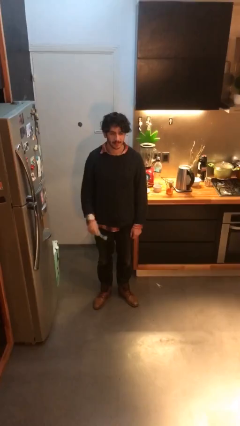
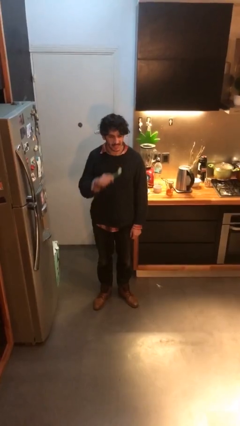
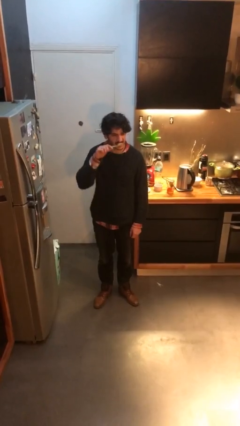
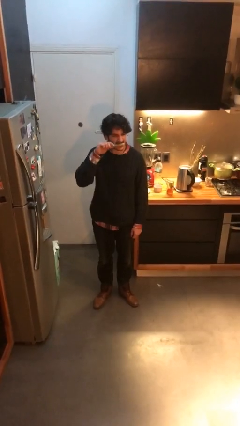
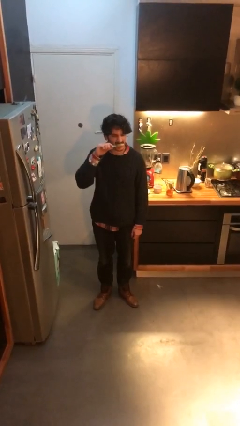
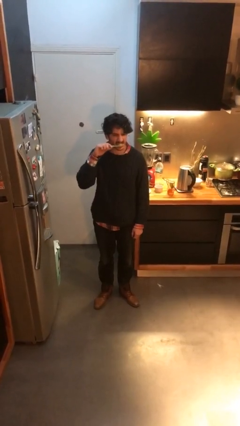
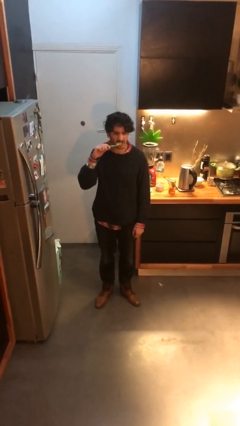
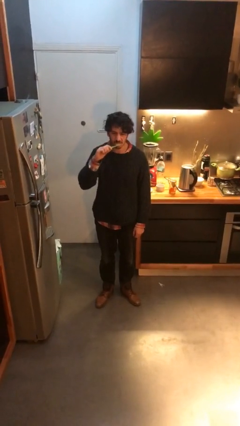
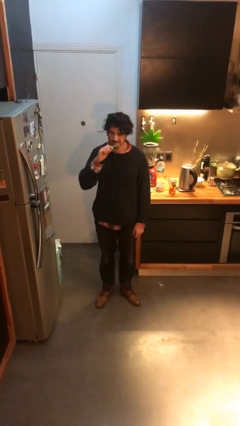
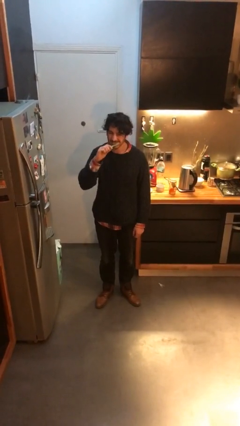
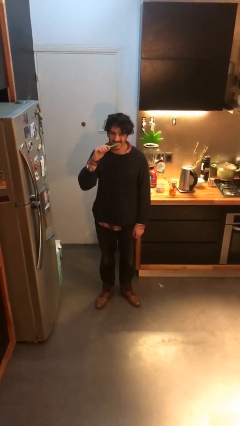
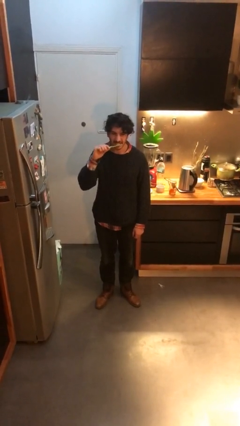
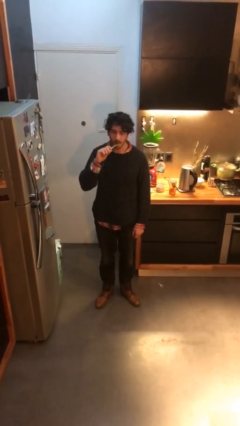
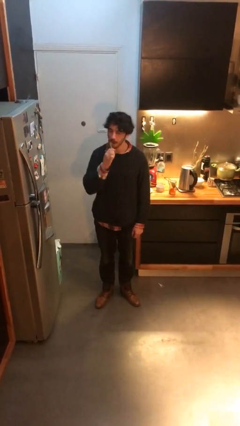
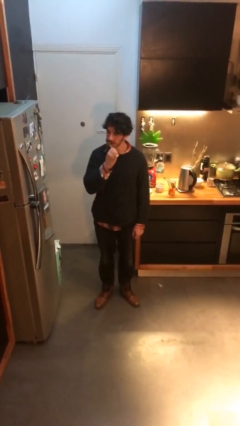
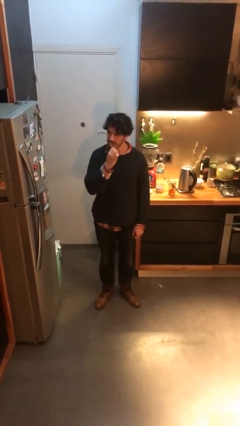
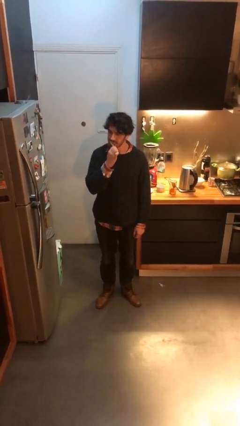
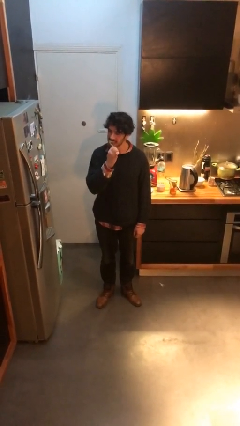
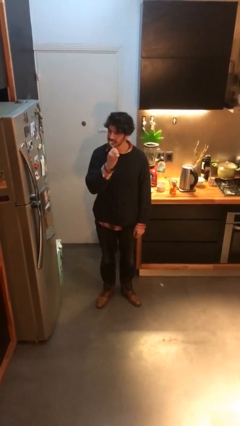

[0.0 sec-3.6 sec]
person brushes teeth

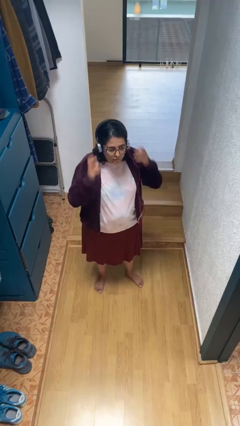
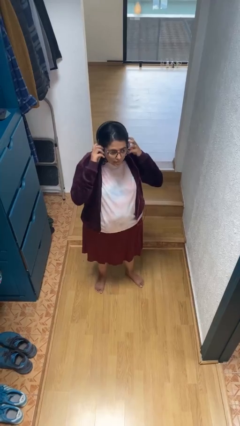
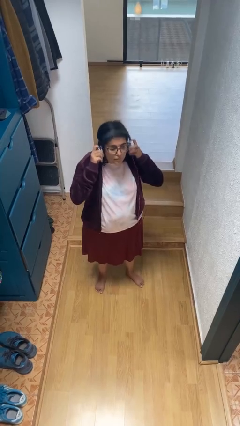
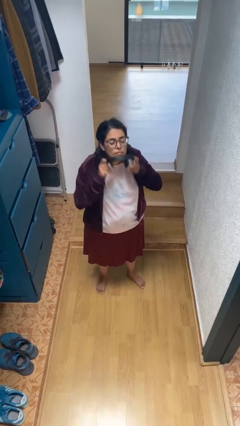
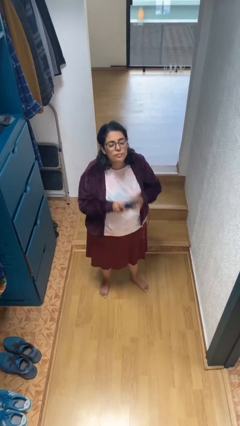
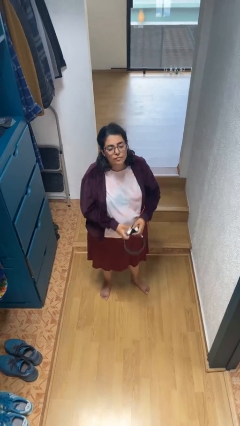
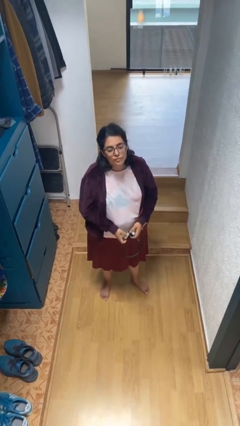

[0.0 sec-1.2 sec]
person takes off headphones

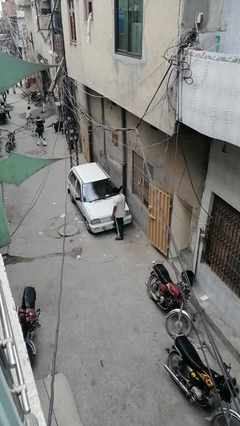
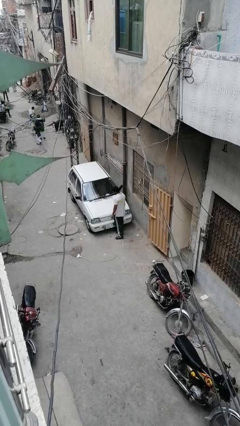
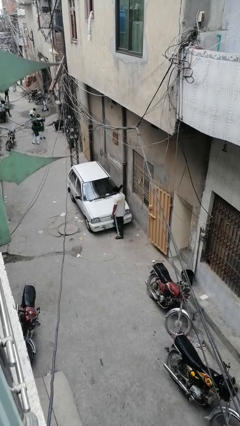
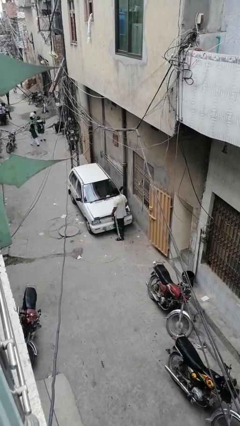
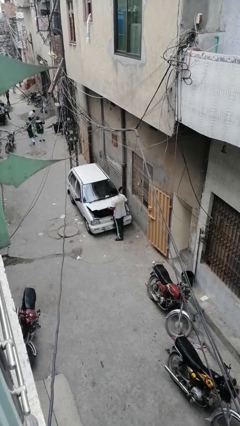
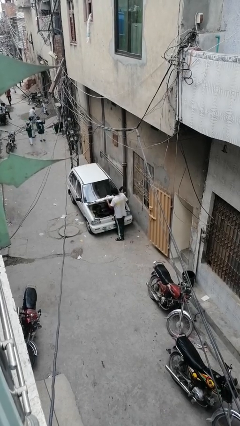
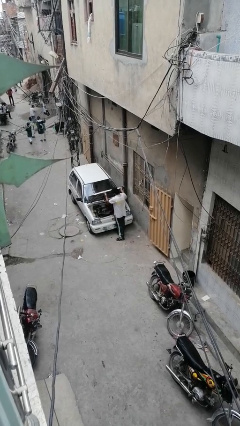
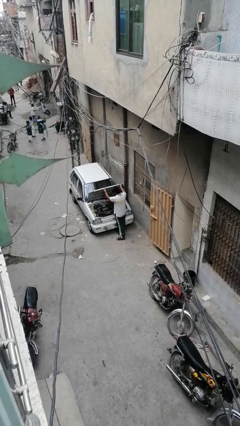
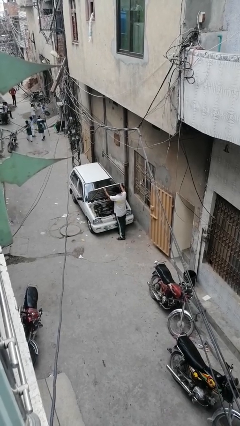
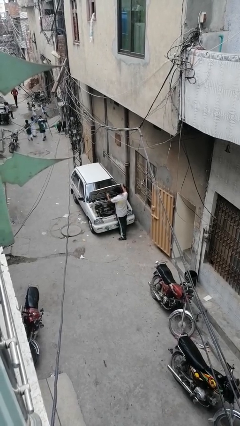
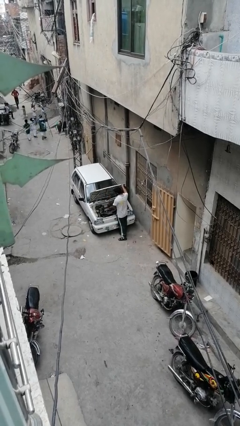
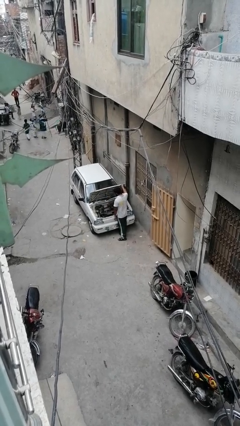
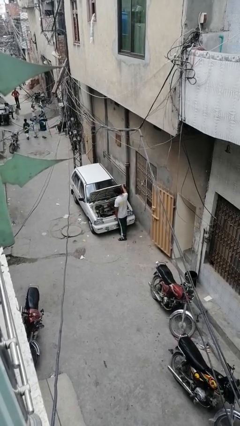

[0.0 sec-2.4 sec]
person opens car hood

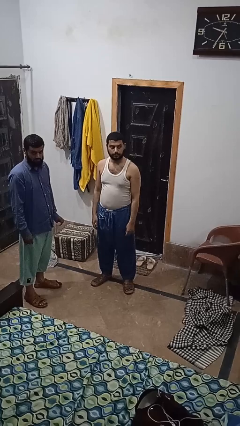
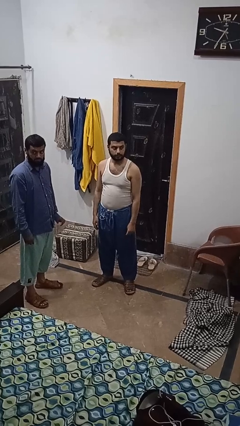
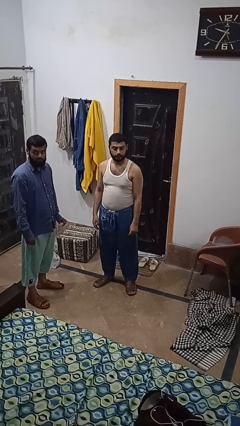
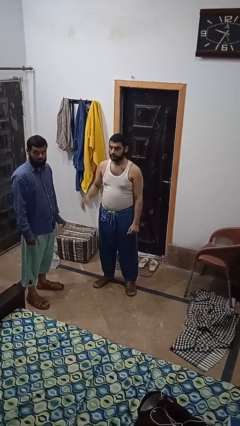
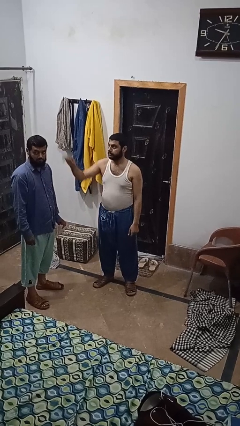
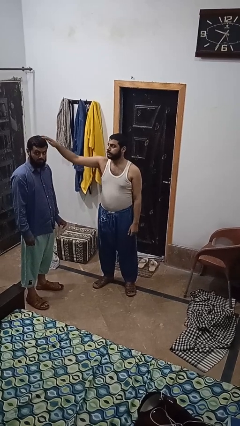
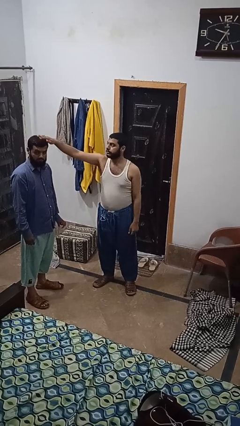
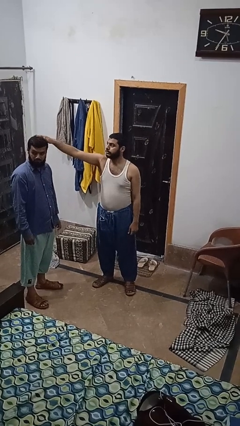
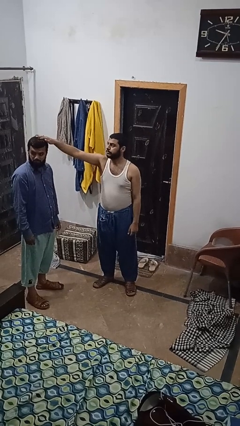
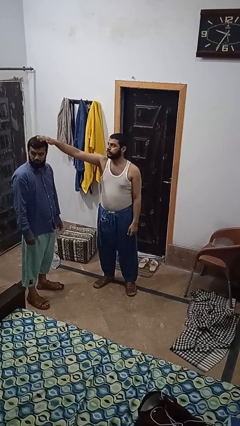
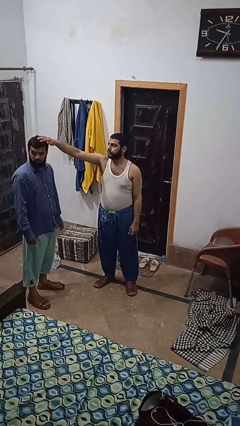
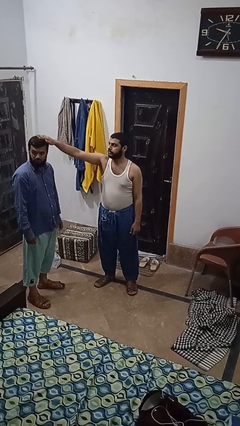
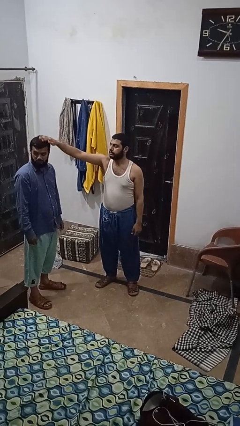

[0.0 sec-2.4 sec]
person grabs person by hair

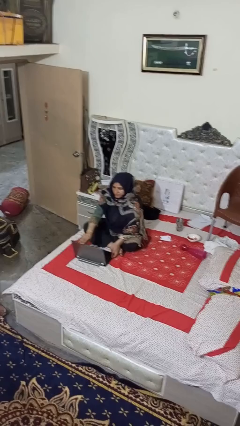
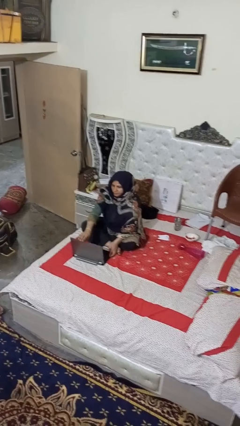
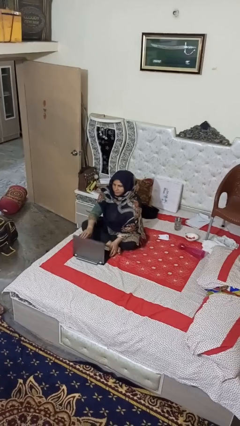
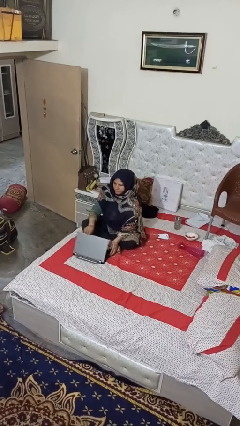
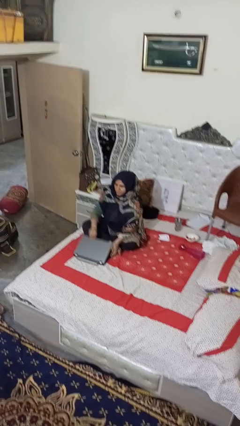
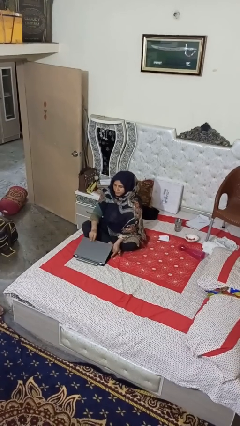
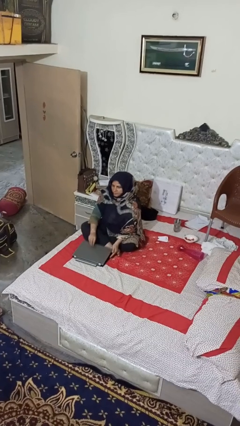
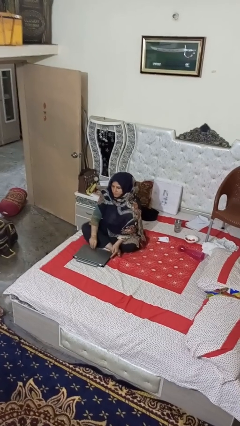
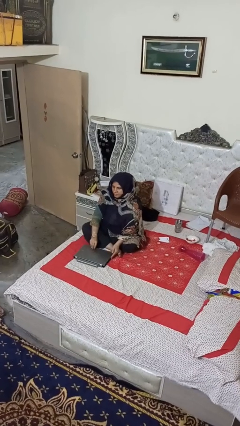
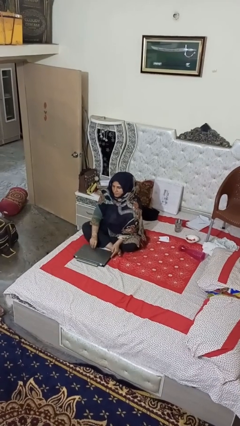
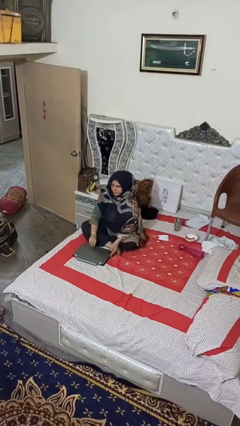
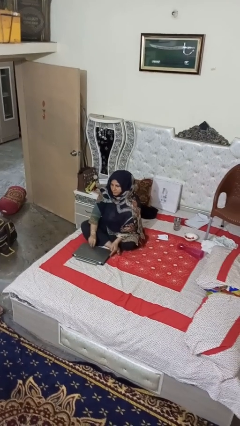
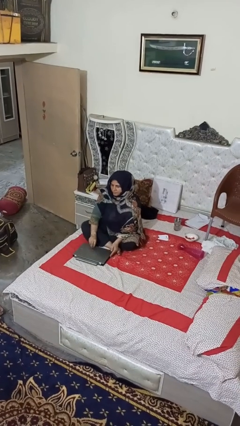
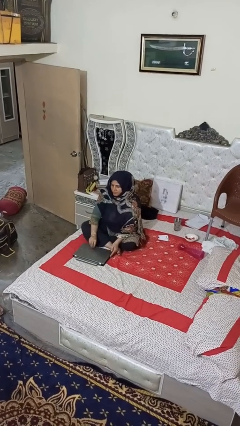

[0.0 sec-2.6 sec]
person closes laptop

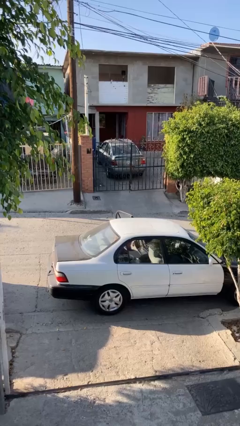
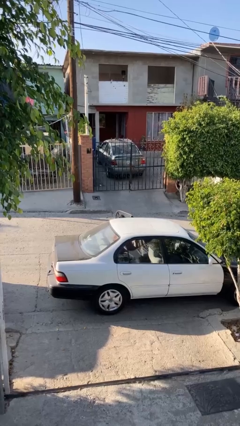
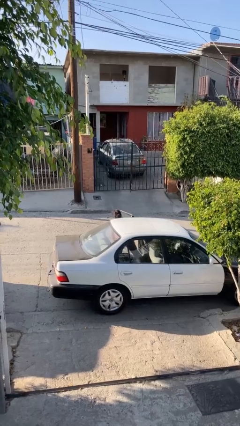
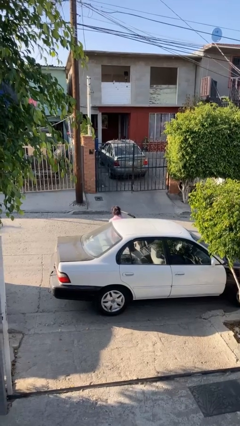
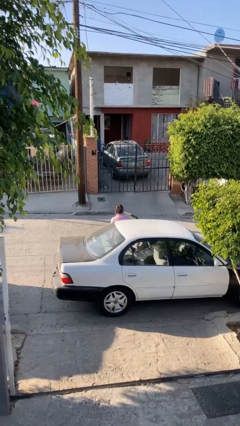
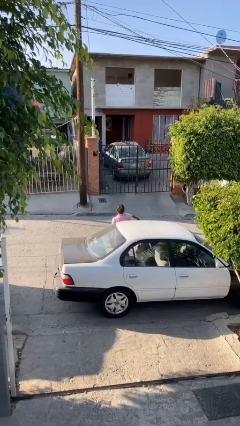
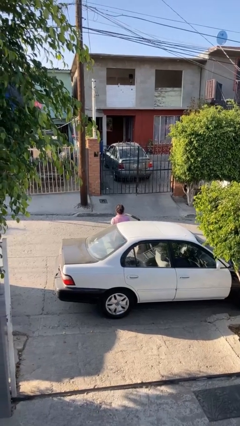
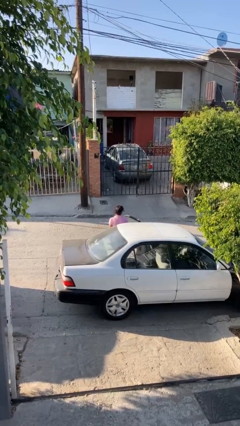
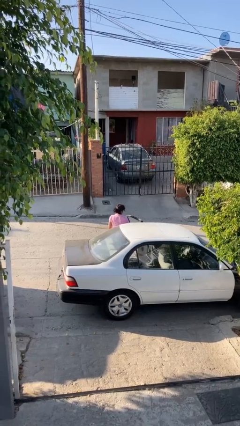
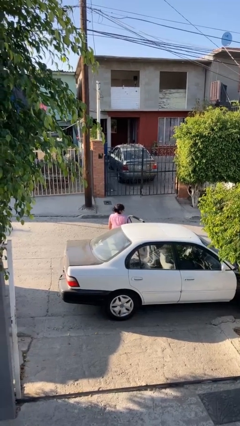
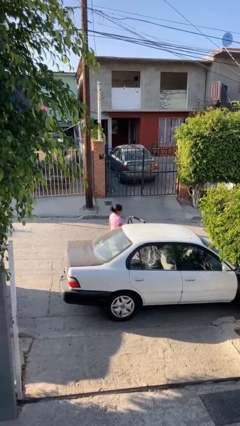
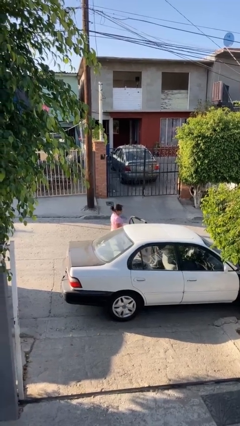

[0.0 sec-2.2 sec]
person exits car

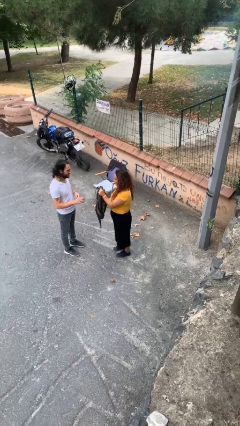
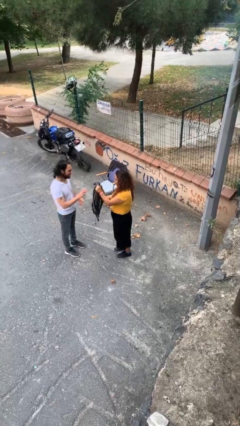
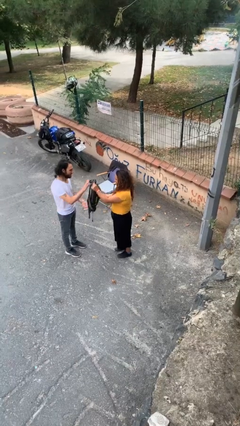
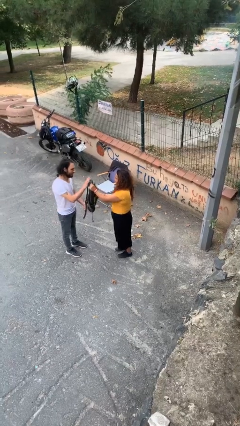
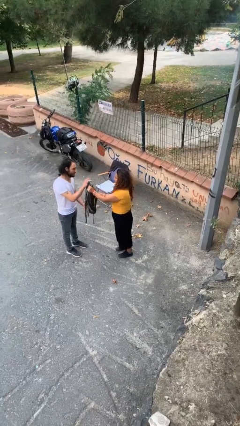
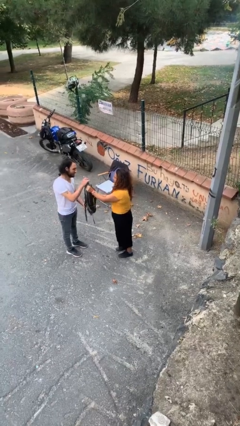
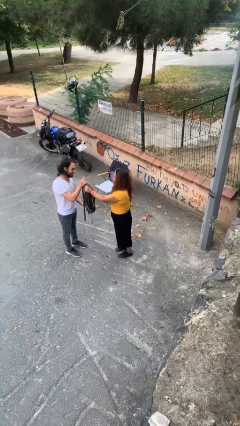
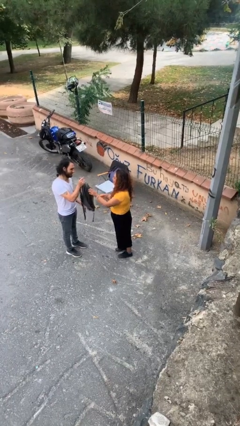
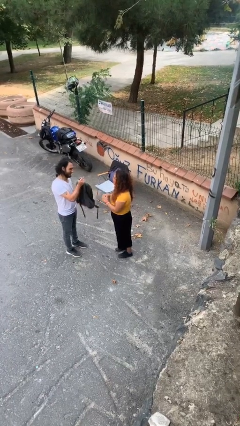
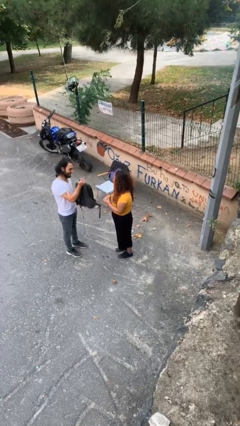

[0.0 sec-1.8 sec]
person transfers object to person

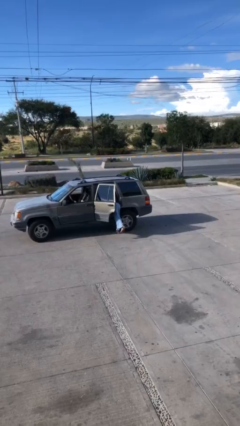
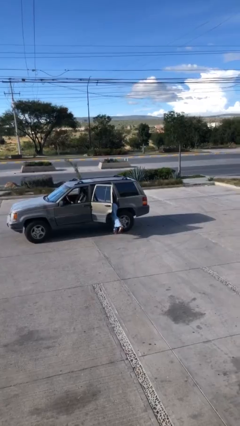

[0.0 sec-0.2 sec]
person unloads car

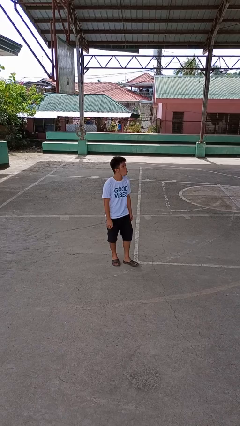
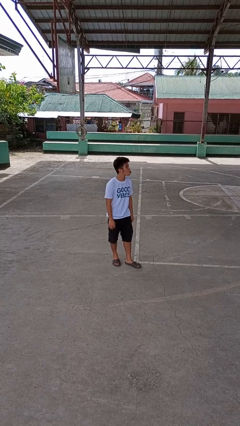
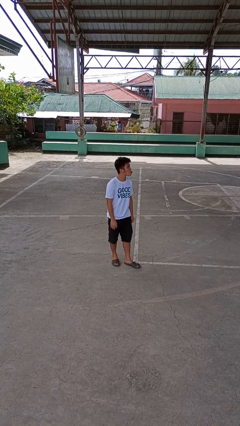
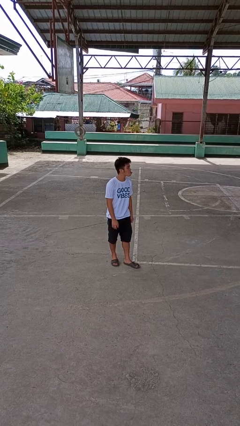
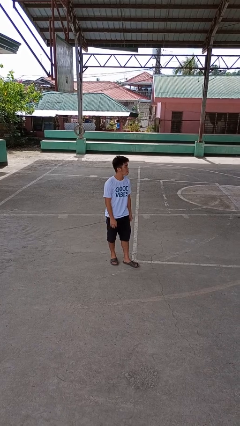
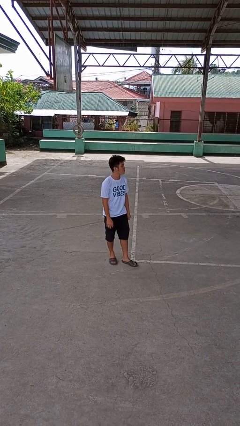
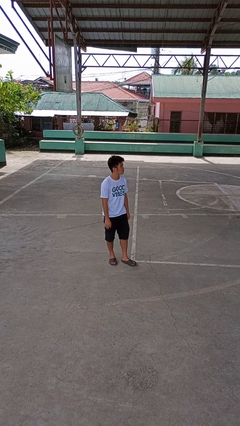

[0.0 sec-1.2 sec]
person sticks out tongue
